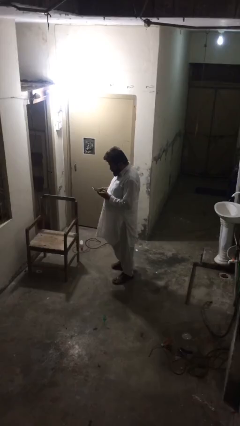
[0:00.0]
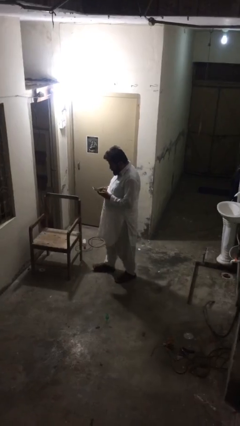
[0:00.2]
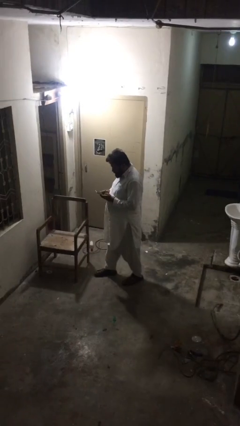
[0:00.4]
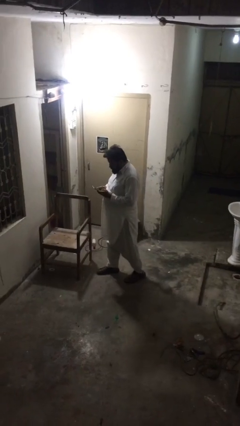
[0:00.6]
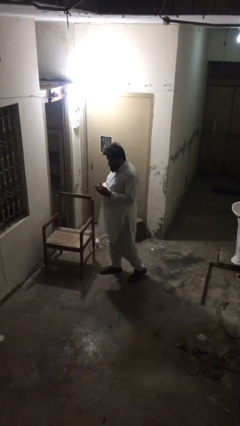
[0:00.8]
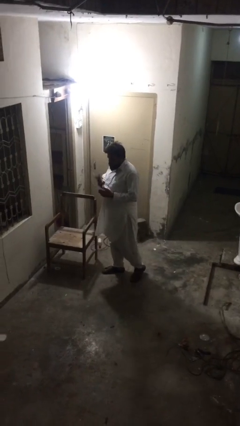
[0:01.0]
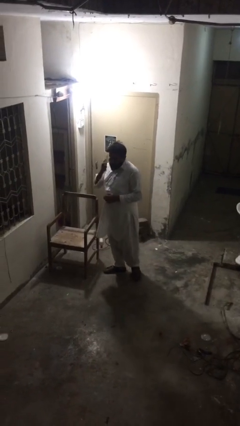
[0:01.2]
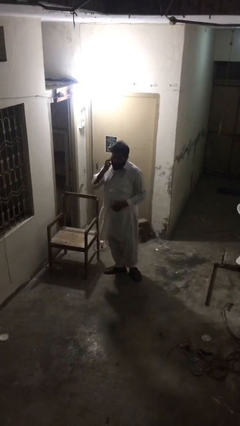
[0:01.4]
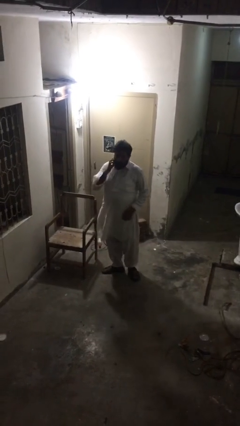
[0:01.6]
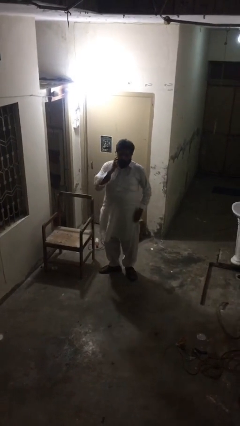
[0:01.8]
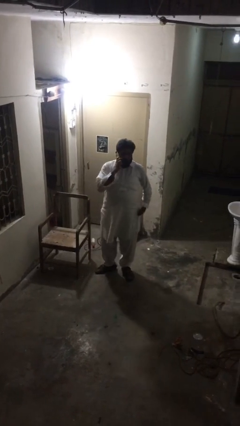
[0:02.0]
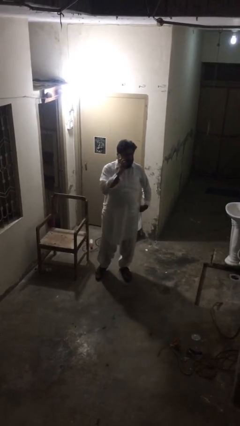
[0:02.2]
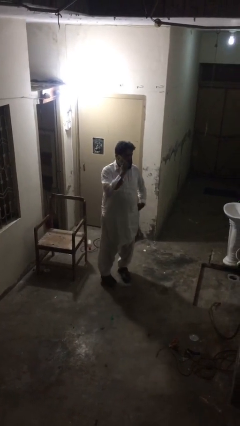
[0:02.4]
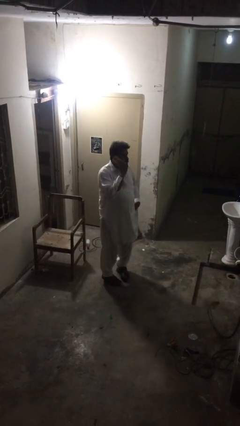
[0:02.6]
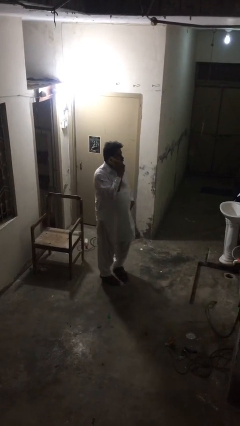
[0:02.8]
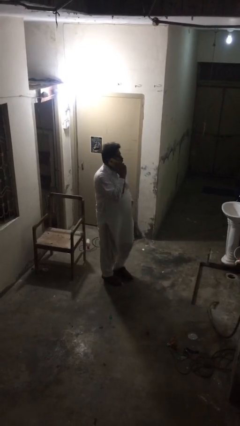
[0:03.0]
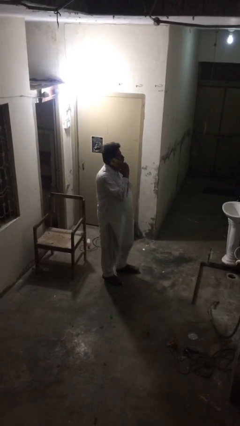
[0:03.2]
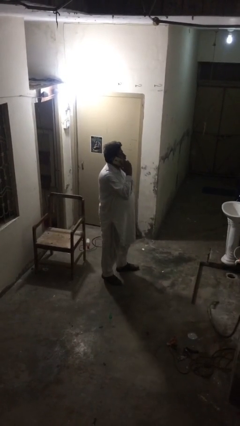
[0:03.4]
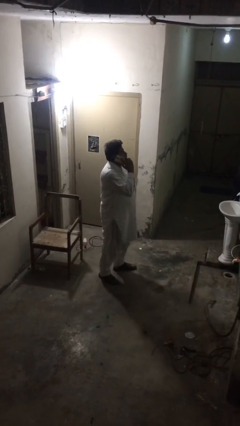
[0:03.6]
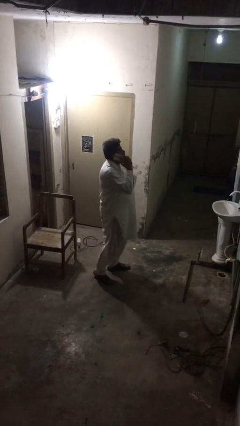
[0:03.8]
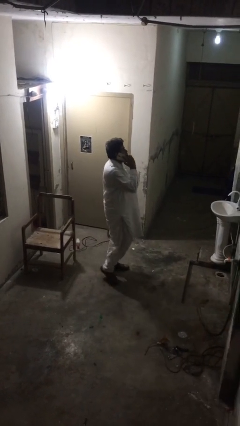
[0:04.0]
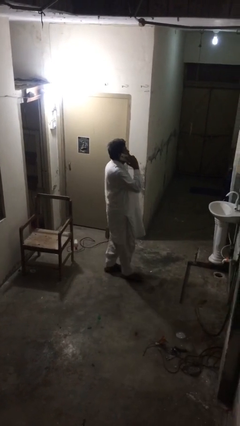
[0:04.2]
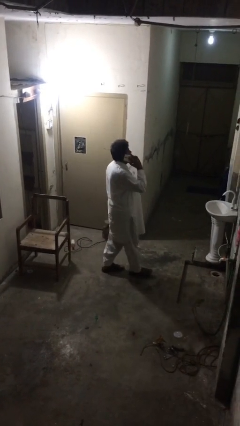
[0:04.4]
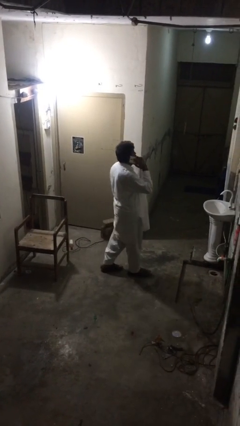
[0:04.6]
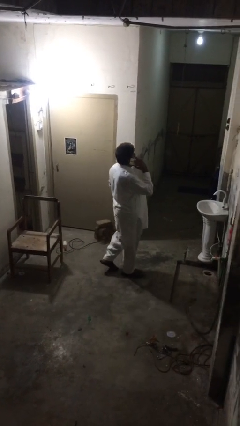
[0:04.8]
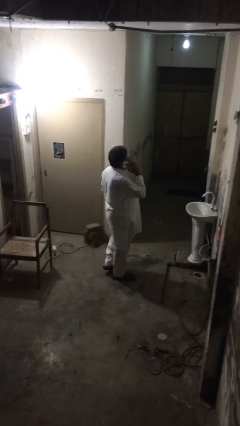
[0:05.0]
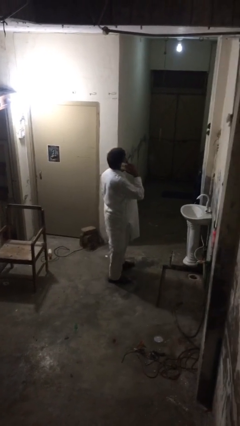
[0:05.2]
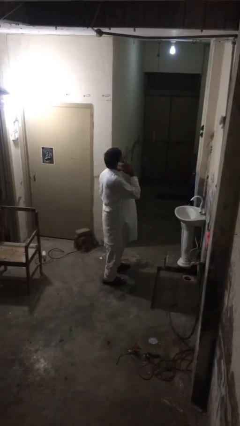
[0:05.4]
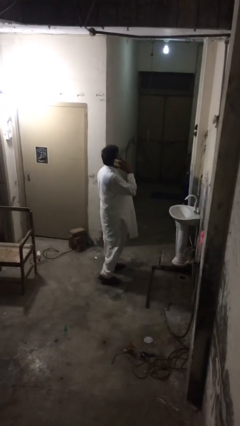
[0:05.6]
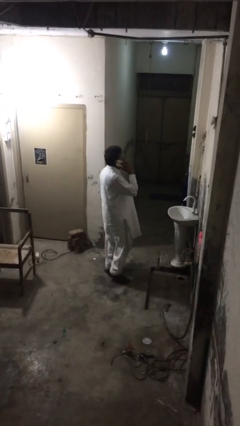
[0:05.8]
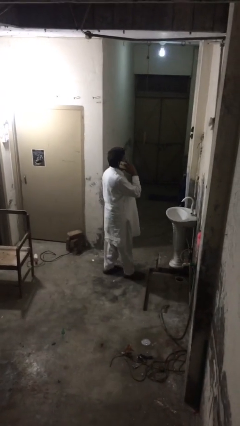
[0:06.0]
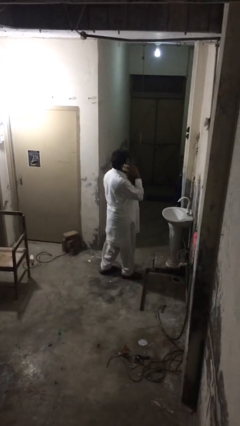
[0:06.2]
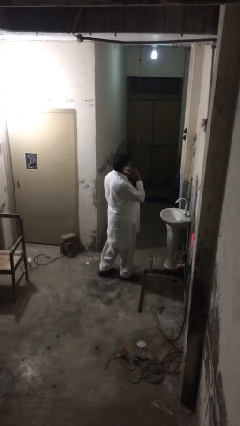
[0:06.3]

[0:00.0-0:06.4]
person talks on phone

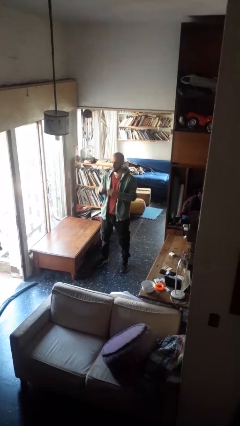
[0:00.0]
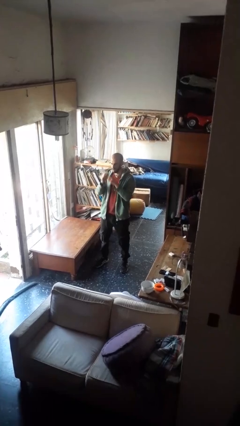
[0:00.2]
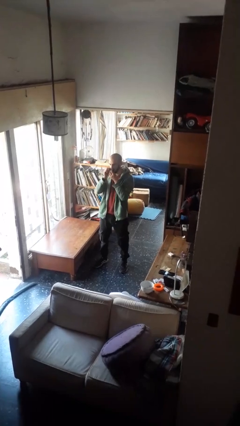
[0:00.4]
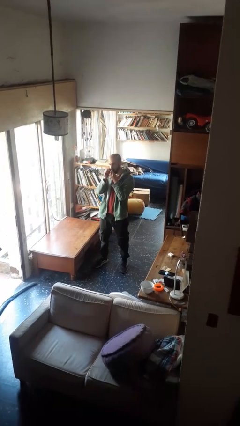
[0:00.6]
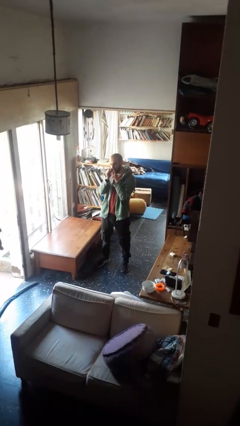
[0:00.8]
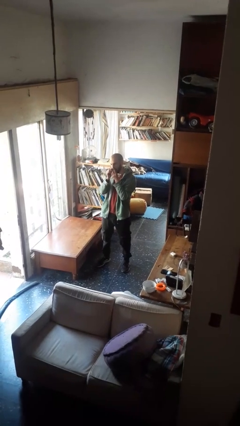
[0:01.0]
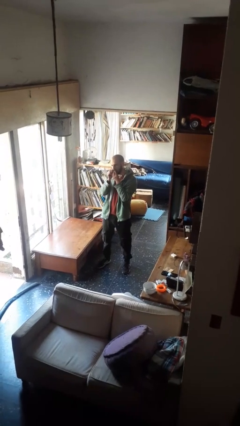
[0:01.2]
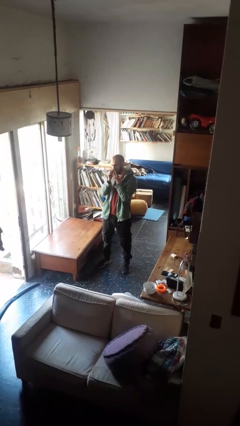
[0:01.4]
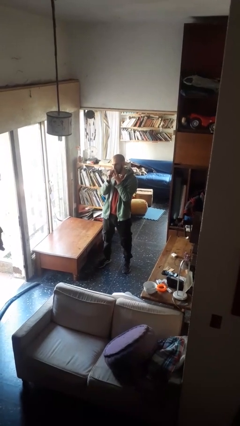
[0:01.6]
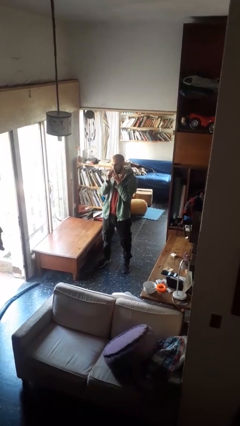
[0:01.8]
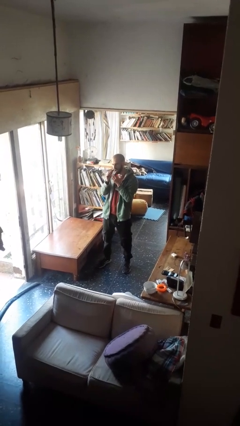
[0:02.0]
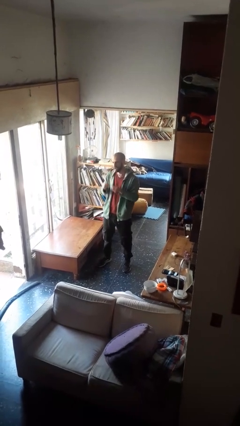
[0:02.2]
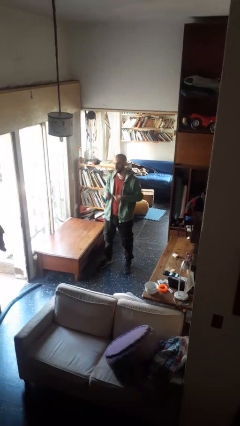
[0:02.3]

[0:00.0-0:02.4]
person flosses

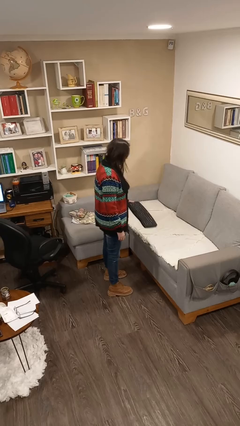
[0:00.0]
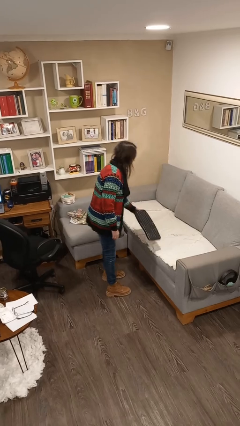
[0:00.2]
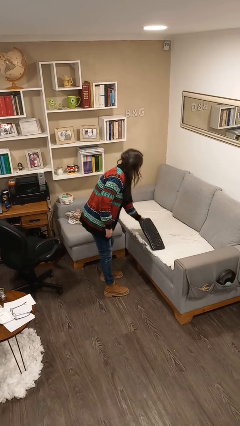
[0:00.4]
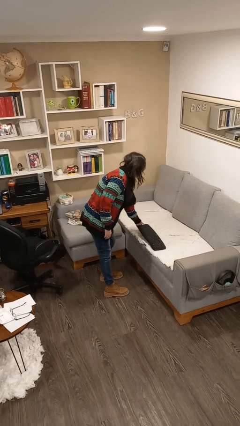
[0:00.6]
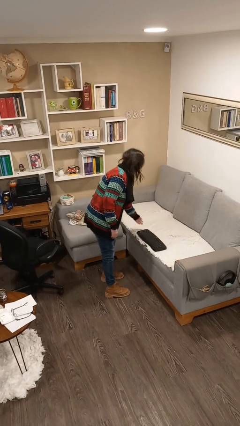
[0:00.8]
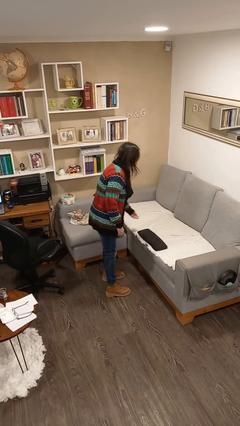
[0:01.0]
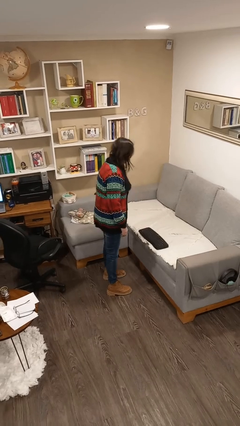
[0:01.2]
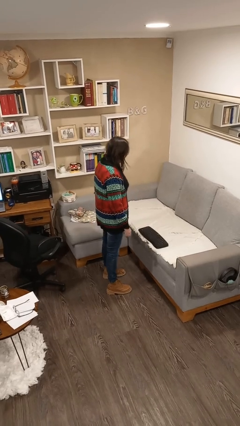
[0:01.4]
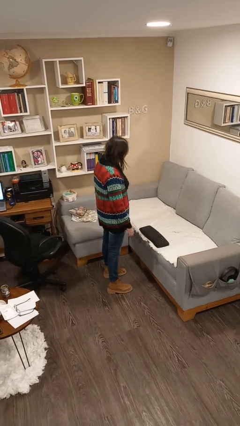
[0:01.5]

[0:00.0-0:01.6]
person puts down object on couch

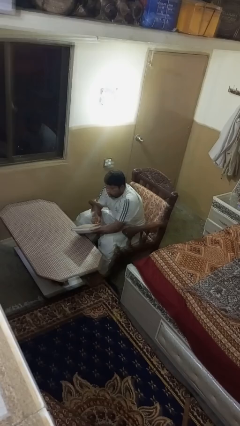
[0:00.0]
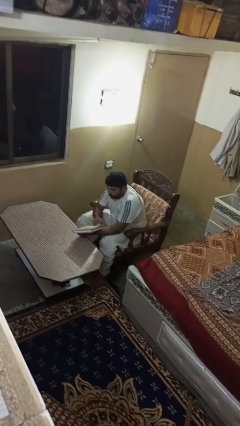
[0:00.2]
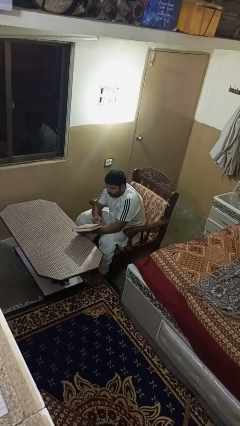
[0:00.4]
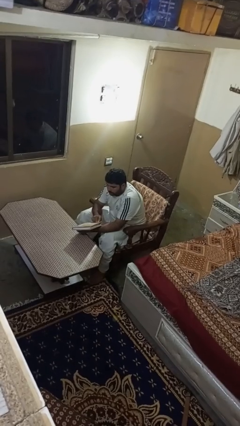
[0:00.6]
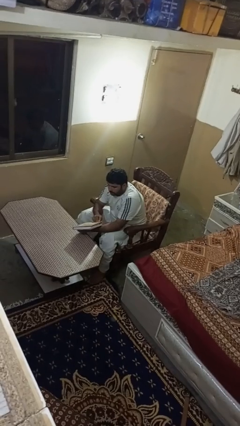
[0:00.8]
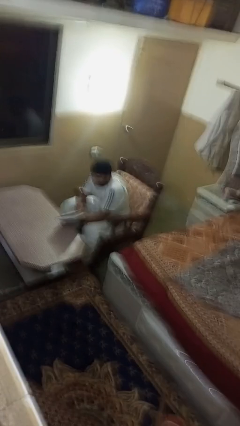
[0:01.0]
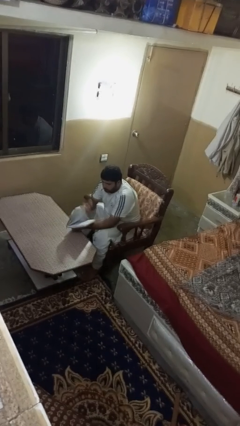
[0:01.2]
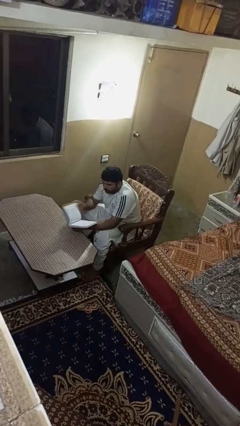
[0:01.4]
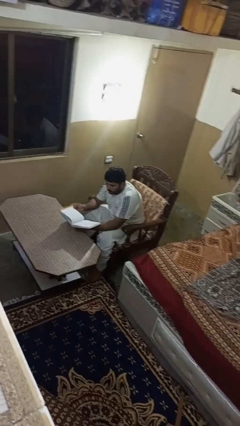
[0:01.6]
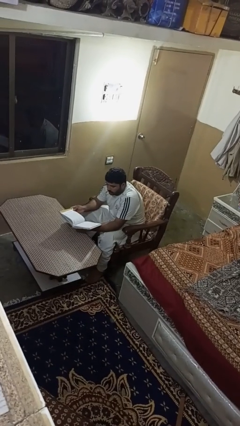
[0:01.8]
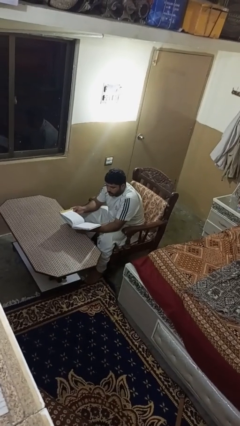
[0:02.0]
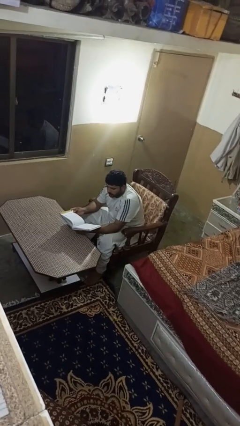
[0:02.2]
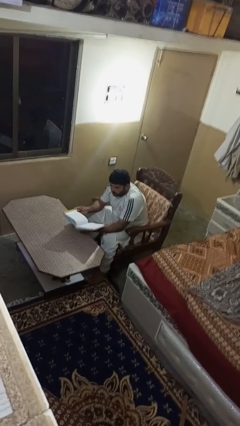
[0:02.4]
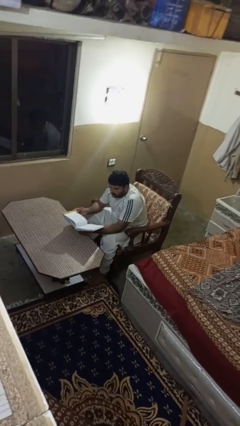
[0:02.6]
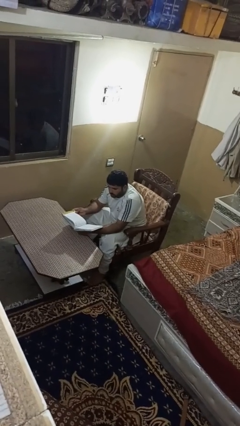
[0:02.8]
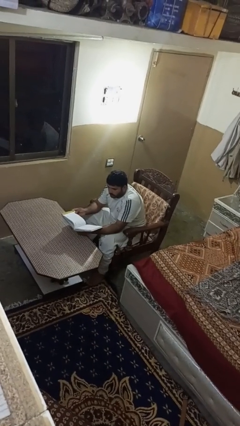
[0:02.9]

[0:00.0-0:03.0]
person reads book

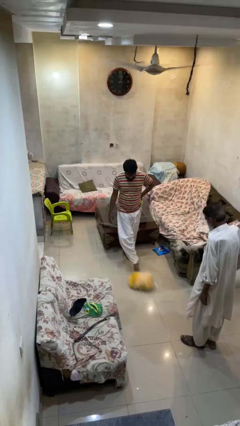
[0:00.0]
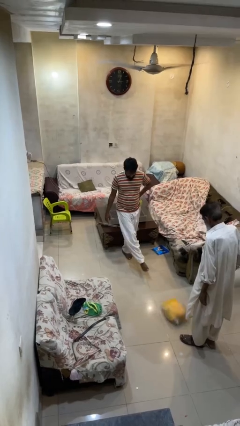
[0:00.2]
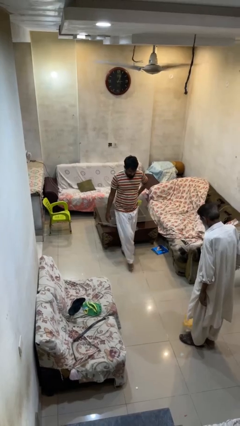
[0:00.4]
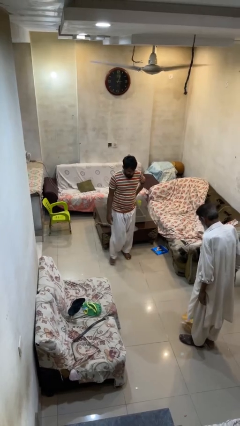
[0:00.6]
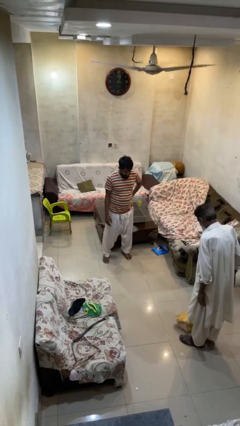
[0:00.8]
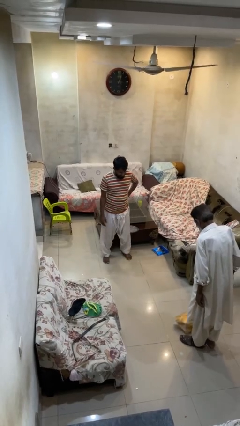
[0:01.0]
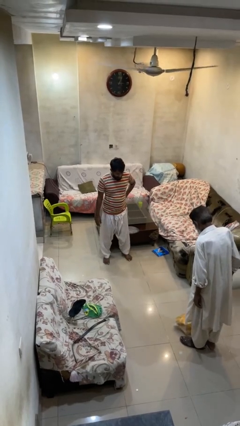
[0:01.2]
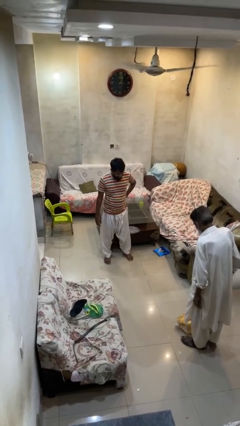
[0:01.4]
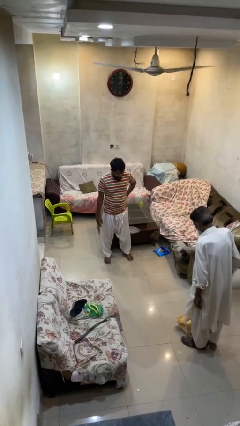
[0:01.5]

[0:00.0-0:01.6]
person kicks object to person

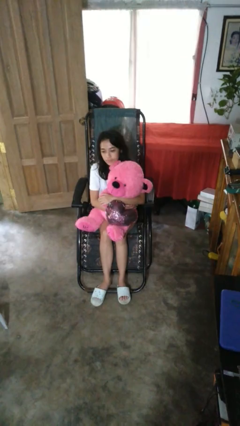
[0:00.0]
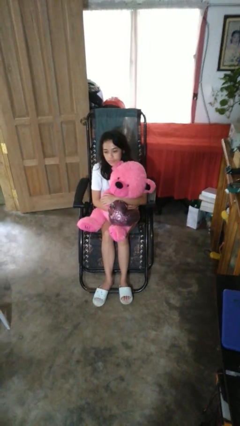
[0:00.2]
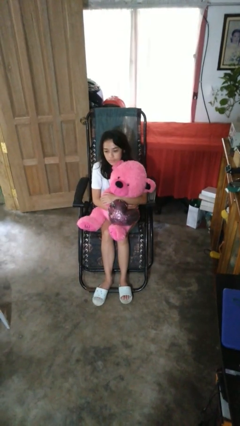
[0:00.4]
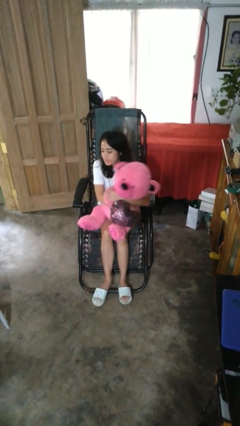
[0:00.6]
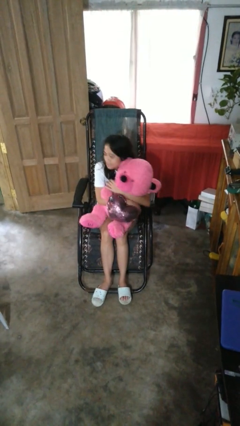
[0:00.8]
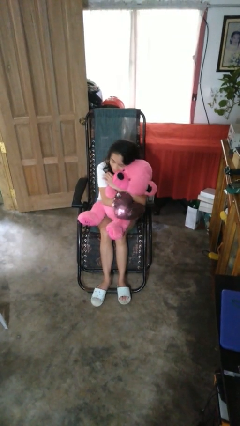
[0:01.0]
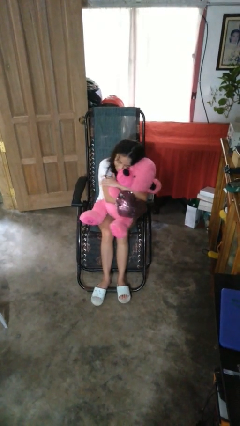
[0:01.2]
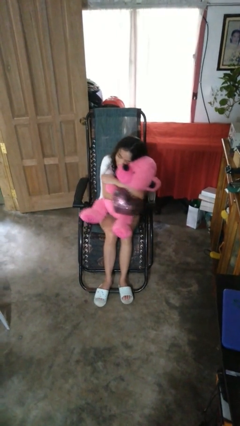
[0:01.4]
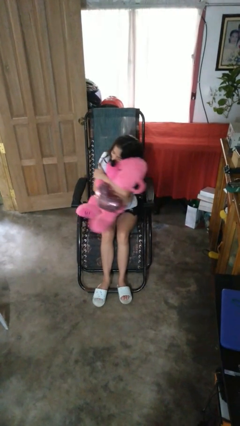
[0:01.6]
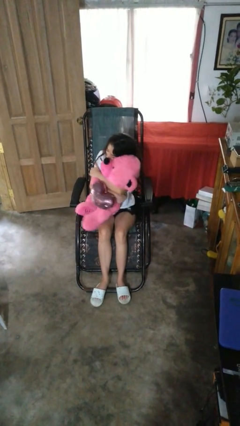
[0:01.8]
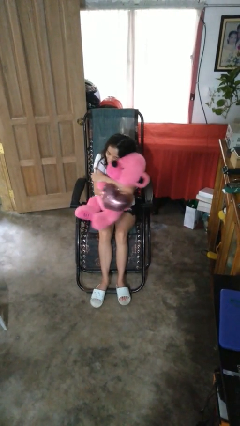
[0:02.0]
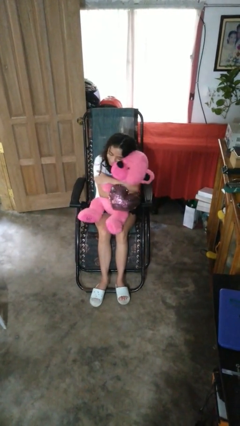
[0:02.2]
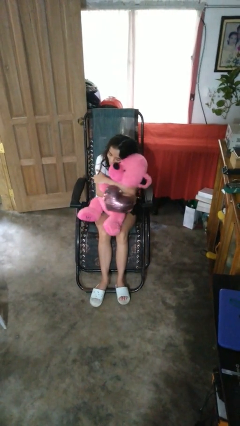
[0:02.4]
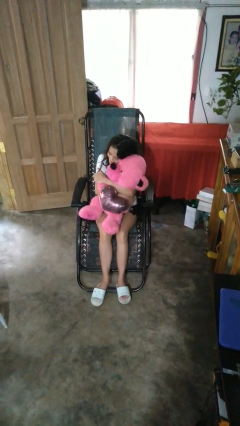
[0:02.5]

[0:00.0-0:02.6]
person hugs stuffed animal

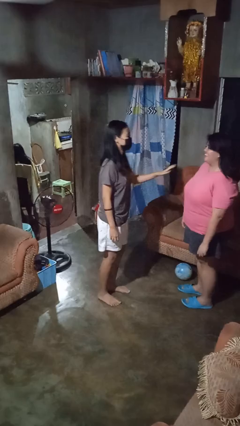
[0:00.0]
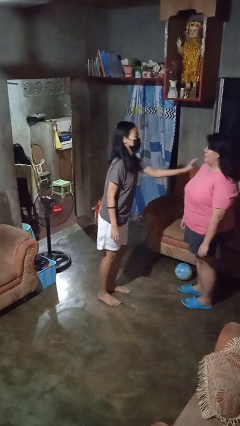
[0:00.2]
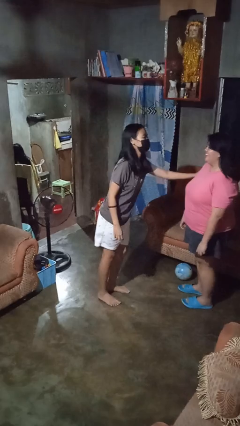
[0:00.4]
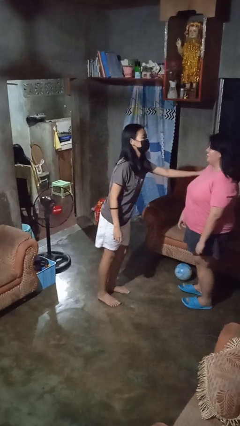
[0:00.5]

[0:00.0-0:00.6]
person shoves person
